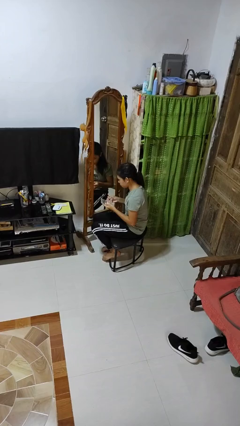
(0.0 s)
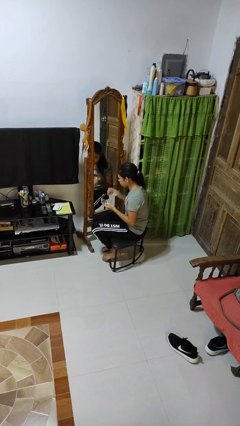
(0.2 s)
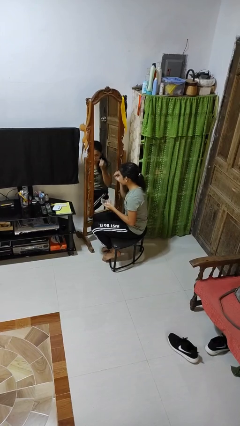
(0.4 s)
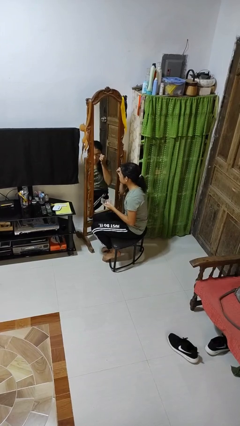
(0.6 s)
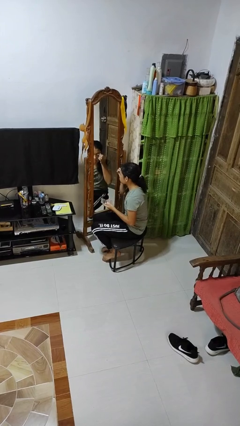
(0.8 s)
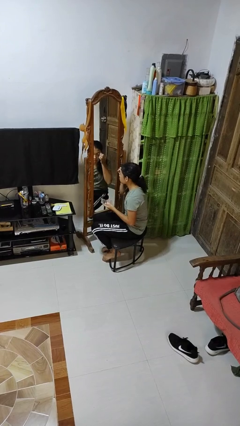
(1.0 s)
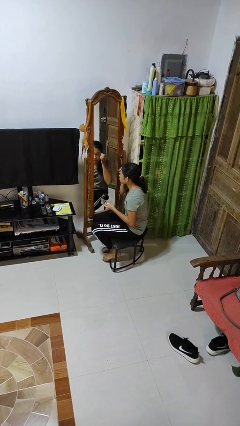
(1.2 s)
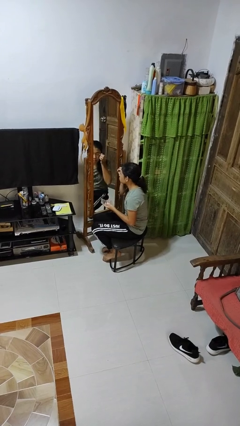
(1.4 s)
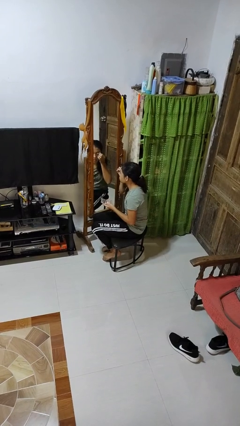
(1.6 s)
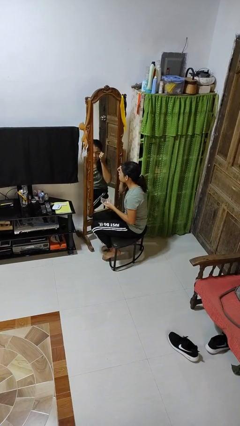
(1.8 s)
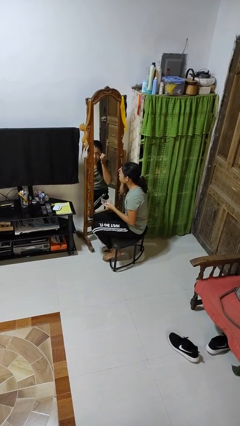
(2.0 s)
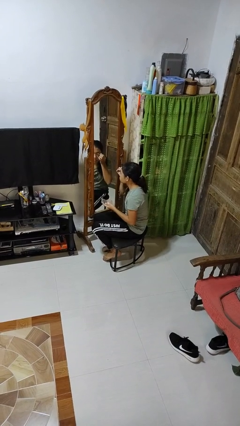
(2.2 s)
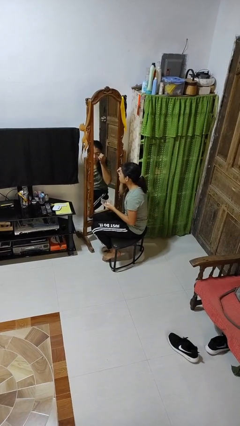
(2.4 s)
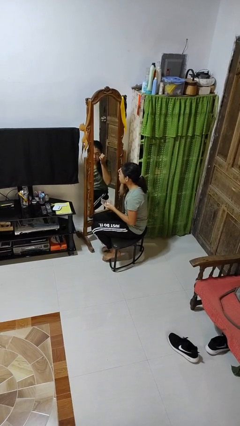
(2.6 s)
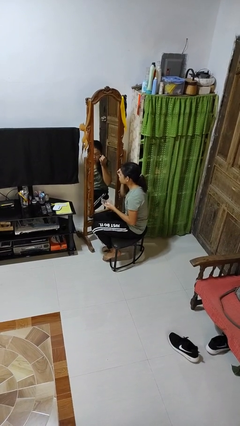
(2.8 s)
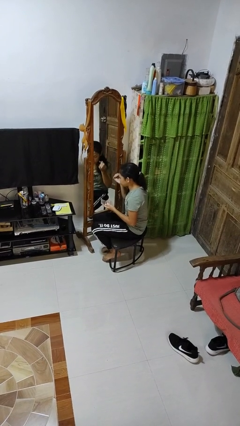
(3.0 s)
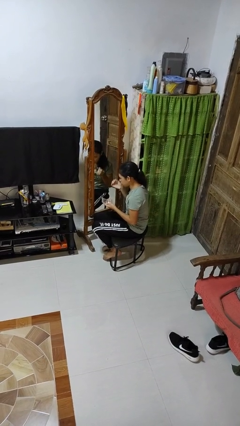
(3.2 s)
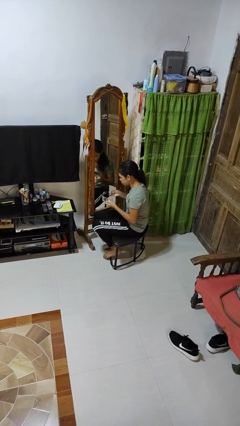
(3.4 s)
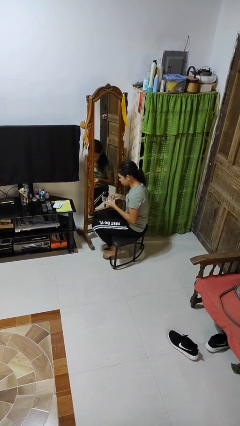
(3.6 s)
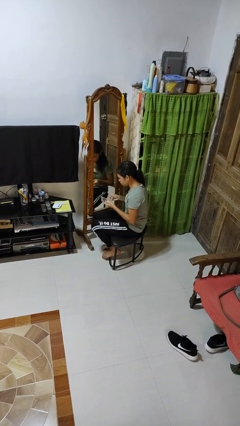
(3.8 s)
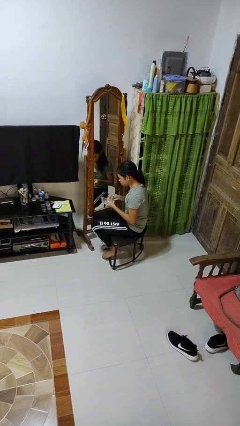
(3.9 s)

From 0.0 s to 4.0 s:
person applies eye makeup

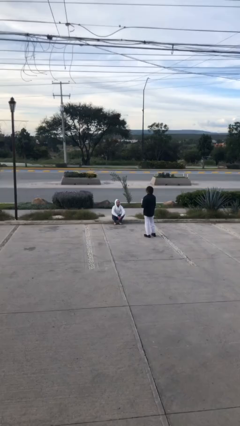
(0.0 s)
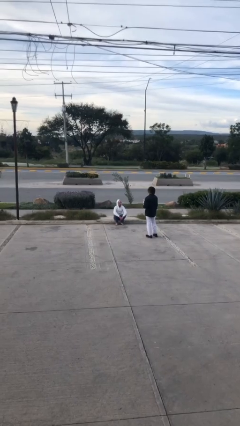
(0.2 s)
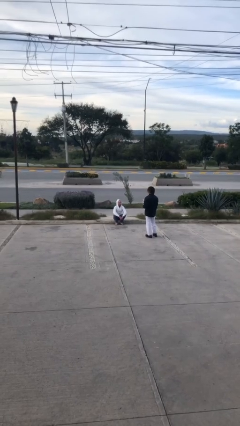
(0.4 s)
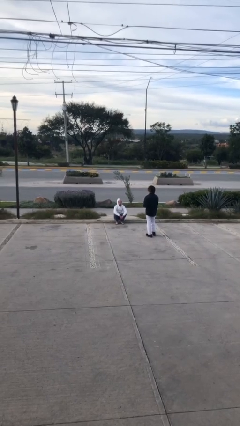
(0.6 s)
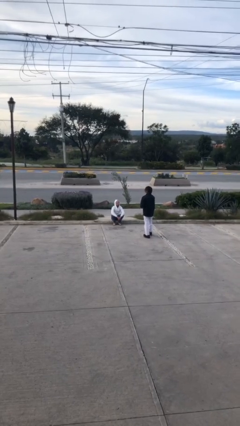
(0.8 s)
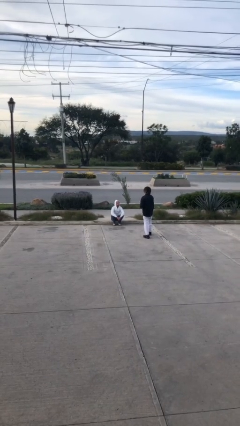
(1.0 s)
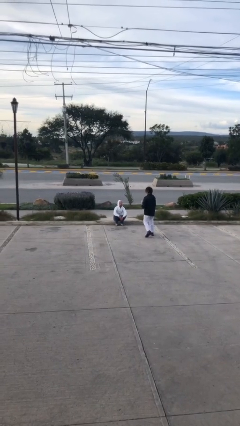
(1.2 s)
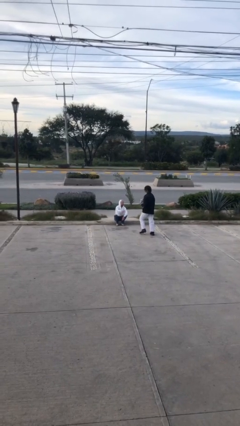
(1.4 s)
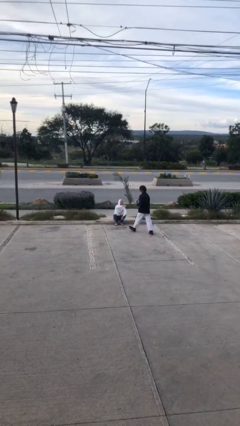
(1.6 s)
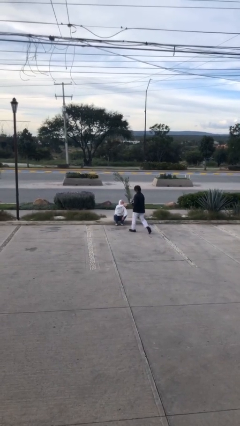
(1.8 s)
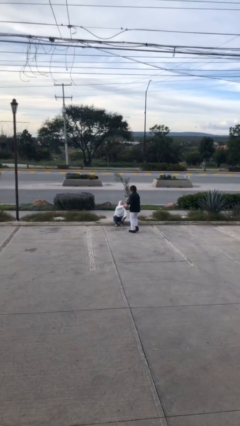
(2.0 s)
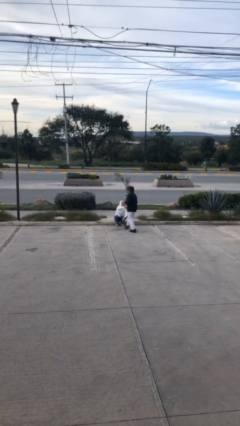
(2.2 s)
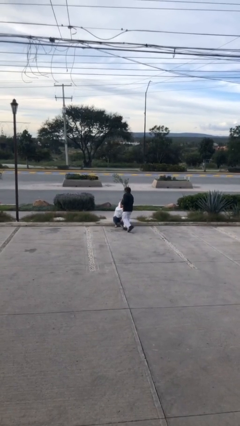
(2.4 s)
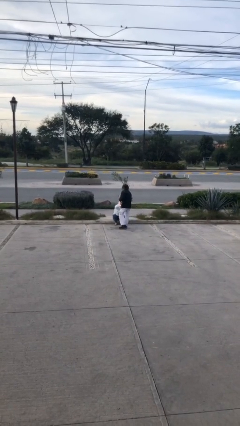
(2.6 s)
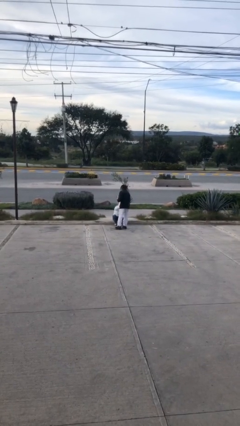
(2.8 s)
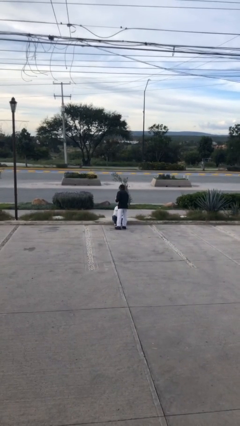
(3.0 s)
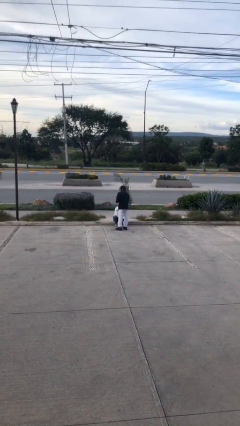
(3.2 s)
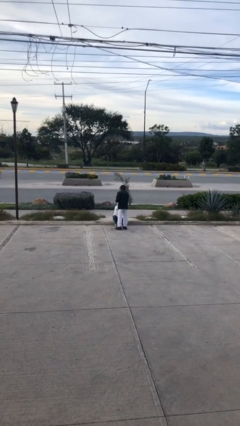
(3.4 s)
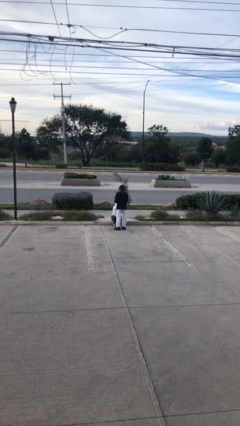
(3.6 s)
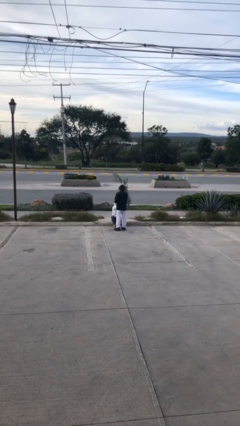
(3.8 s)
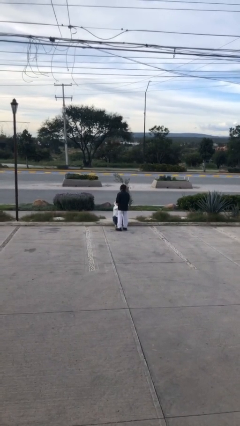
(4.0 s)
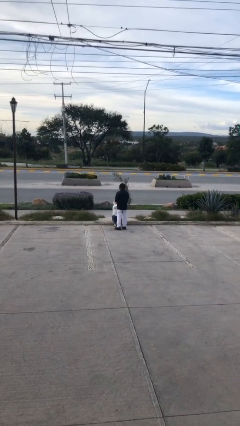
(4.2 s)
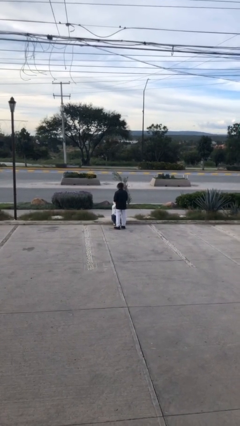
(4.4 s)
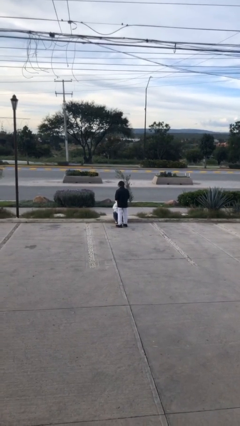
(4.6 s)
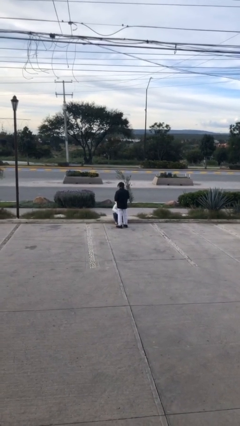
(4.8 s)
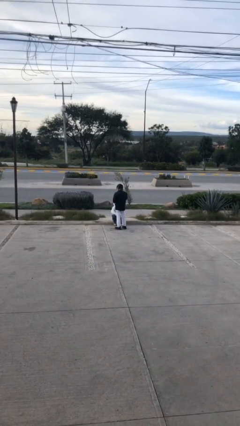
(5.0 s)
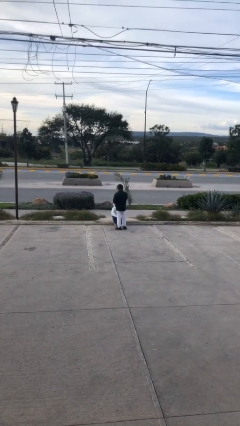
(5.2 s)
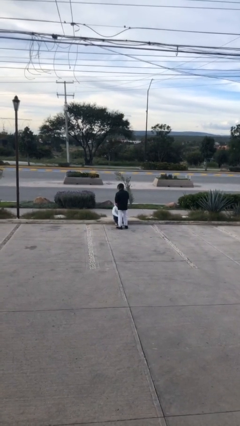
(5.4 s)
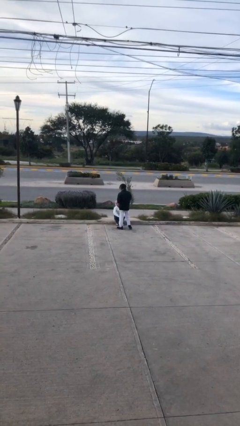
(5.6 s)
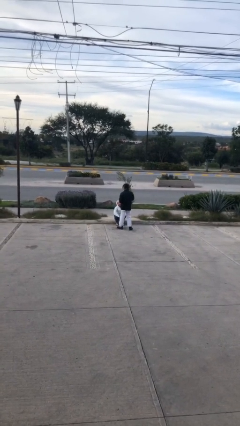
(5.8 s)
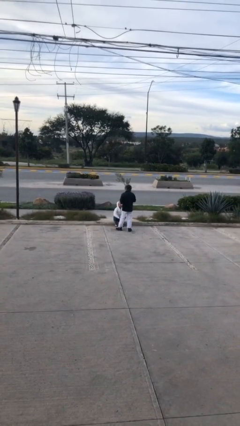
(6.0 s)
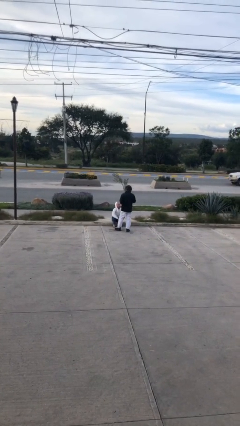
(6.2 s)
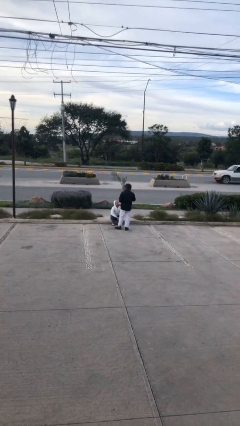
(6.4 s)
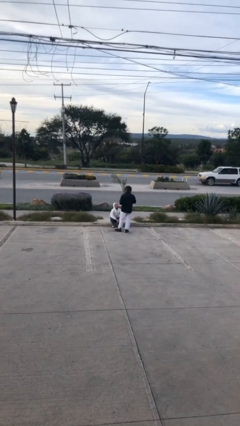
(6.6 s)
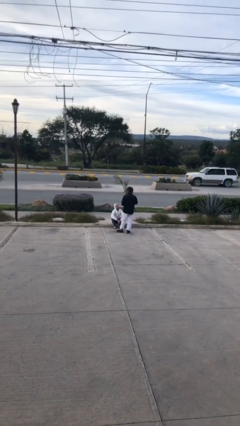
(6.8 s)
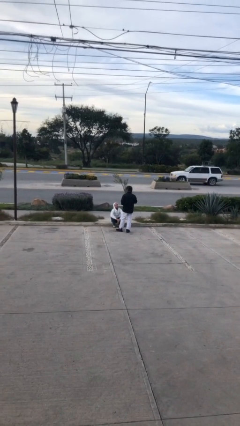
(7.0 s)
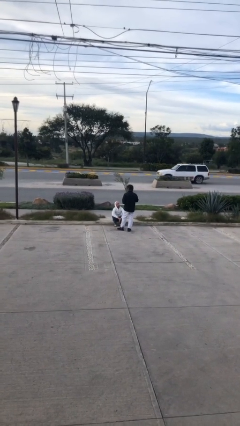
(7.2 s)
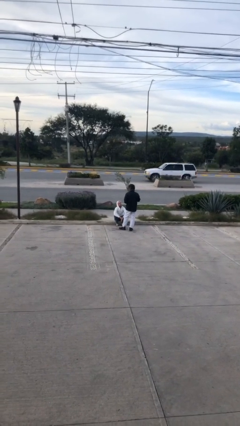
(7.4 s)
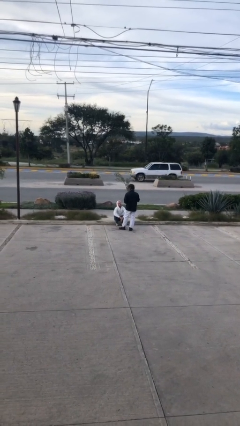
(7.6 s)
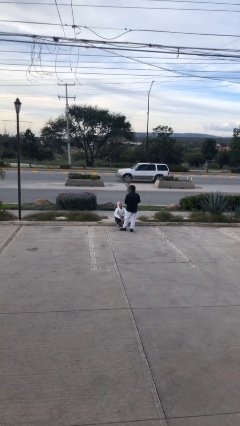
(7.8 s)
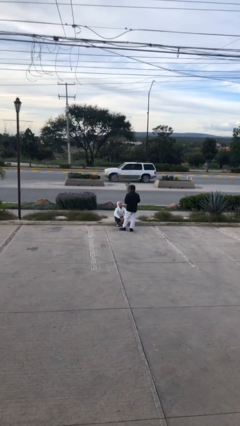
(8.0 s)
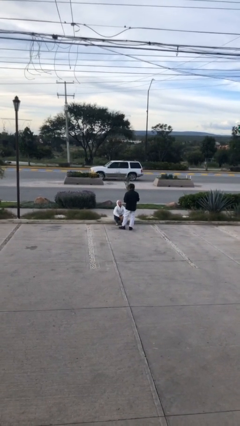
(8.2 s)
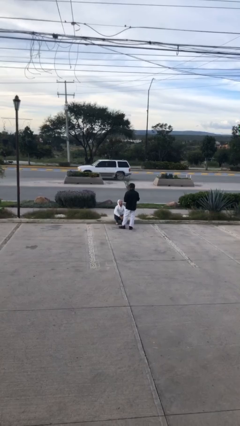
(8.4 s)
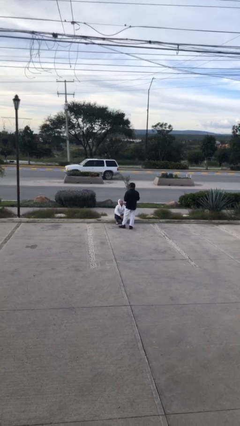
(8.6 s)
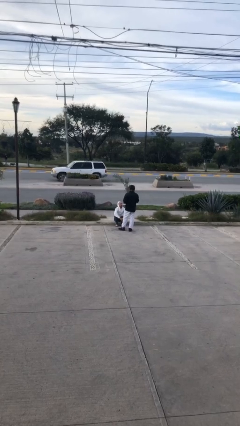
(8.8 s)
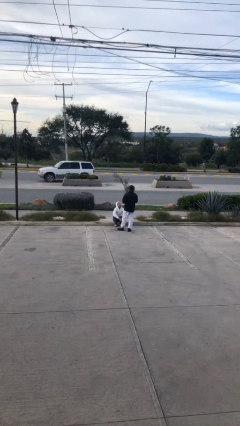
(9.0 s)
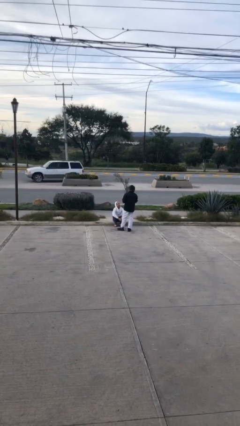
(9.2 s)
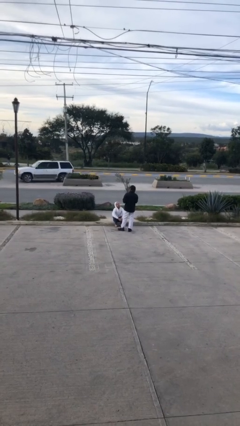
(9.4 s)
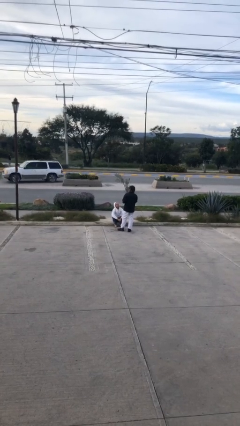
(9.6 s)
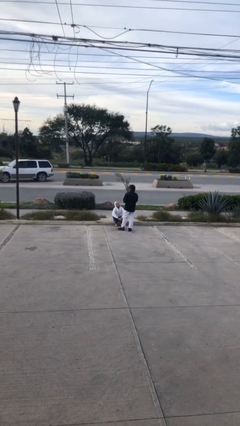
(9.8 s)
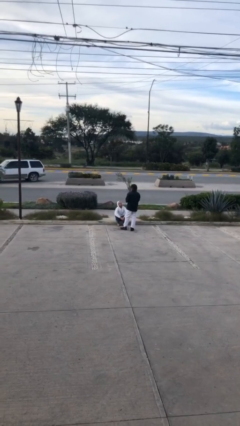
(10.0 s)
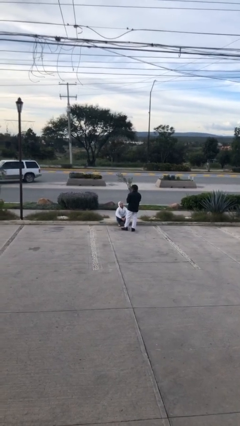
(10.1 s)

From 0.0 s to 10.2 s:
person shakes hand

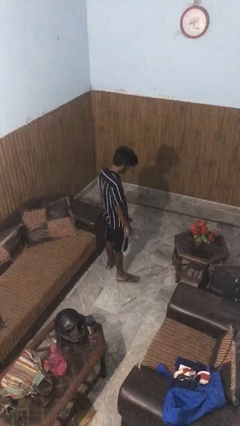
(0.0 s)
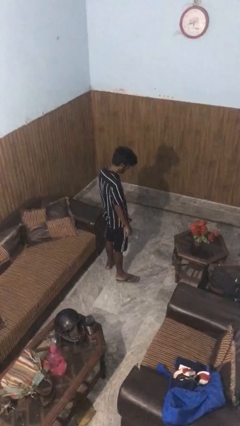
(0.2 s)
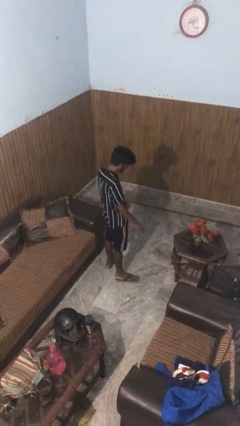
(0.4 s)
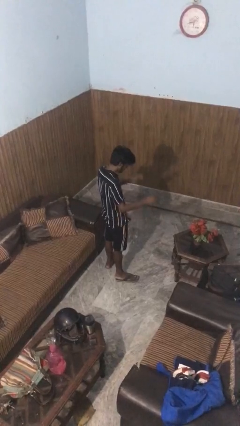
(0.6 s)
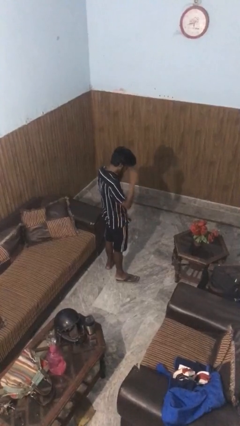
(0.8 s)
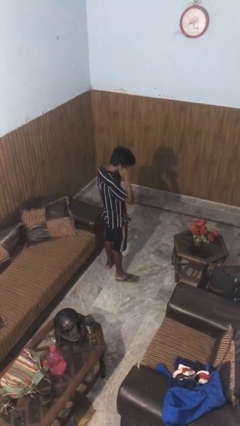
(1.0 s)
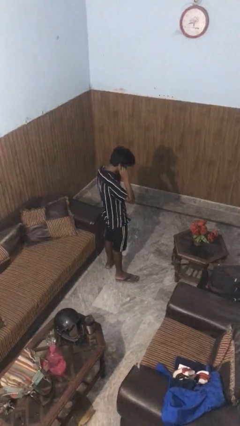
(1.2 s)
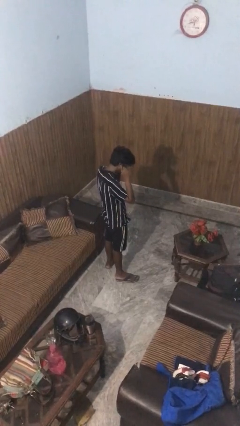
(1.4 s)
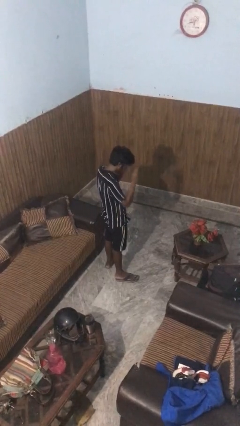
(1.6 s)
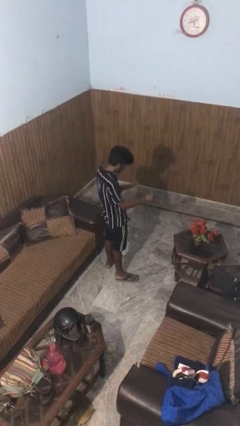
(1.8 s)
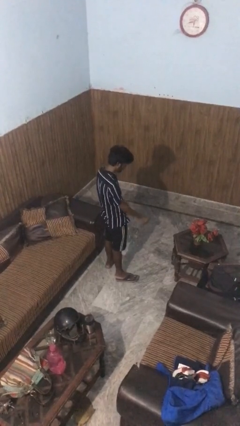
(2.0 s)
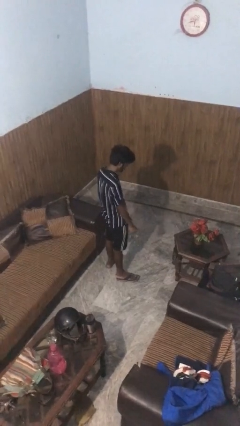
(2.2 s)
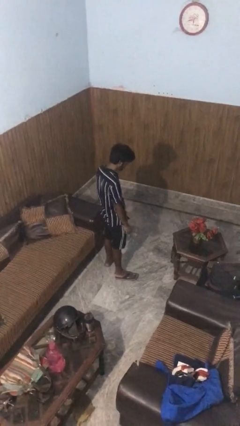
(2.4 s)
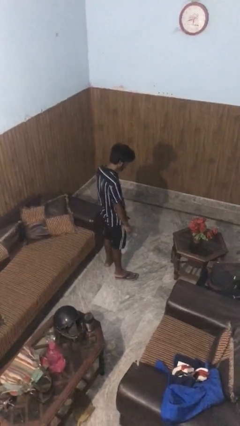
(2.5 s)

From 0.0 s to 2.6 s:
person takes off headphones

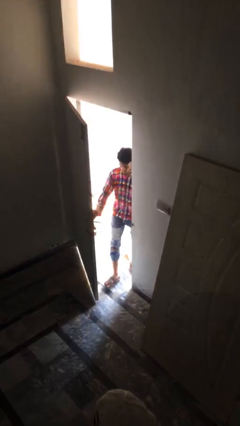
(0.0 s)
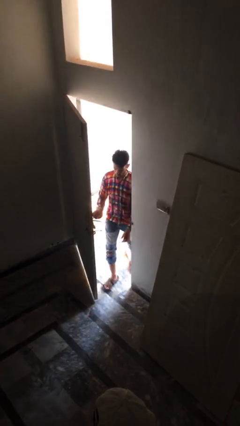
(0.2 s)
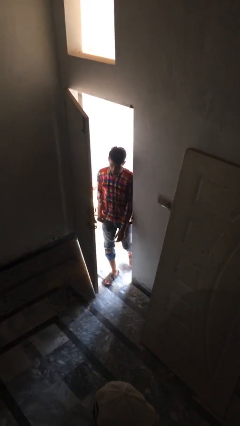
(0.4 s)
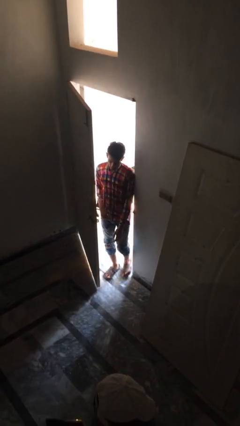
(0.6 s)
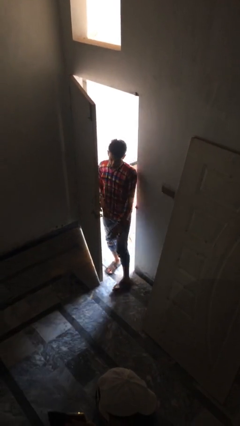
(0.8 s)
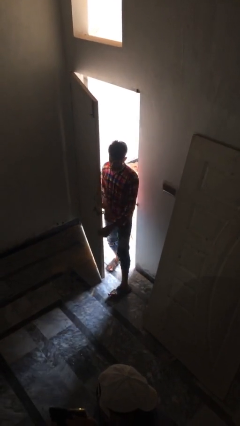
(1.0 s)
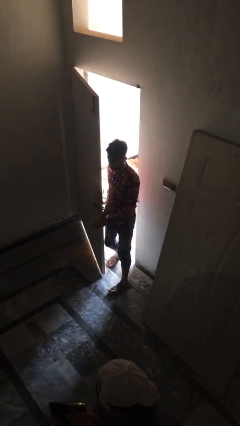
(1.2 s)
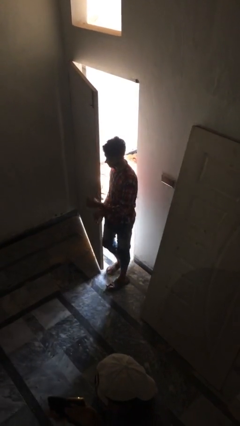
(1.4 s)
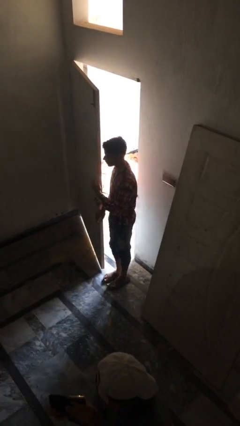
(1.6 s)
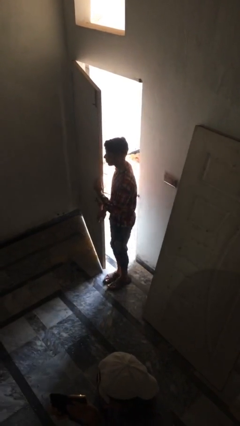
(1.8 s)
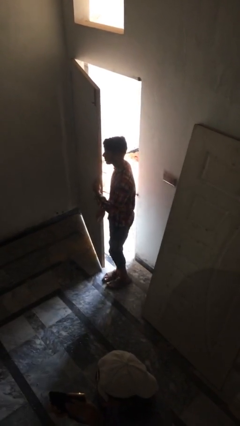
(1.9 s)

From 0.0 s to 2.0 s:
person enters scene through structure
